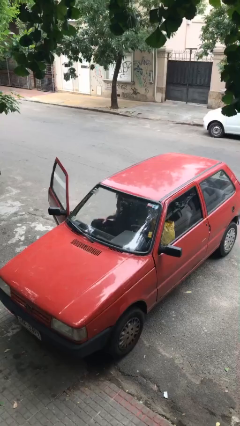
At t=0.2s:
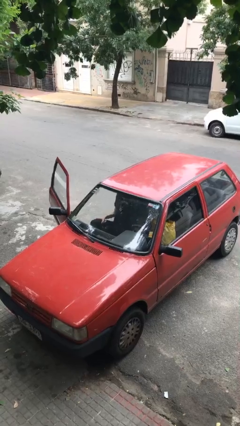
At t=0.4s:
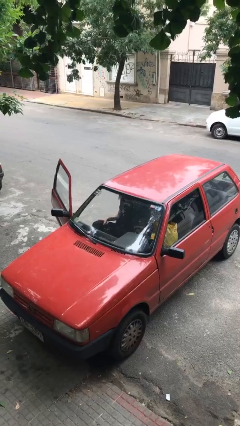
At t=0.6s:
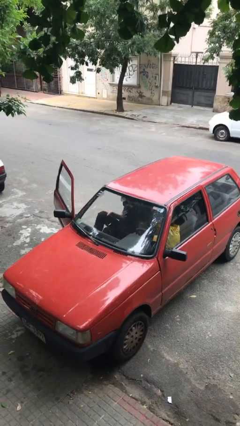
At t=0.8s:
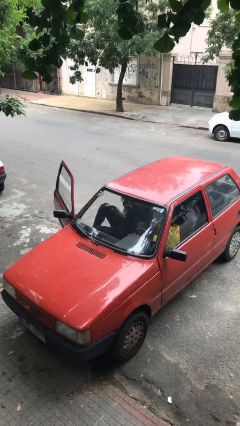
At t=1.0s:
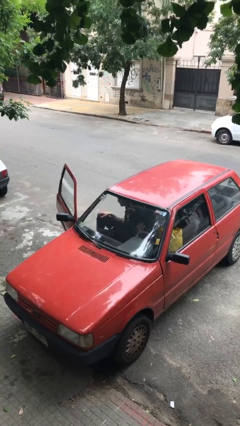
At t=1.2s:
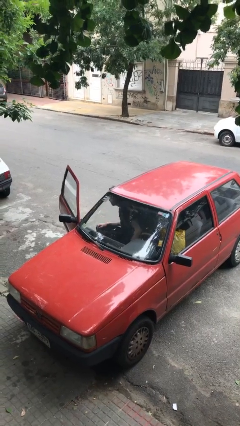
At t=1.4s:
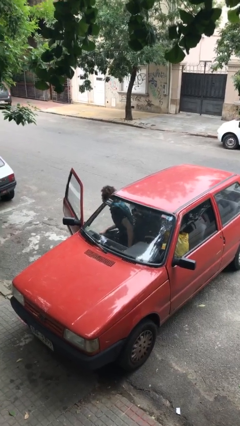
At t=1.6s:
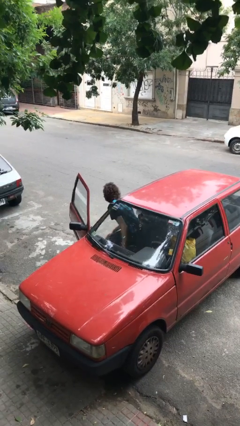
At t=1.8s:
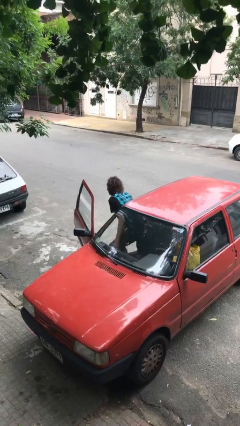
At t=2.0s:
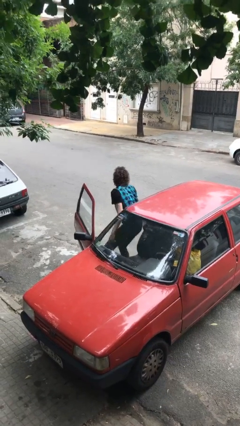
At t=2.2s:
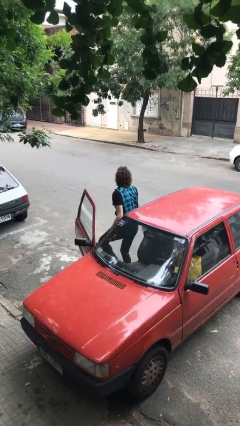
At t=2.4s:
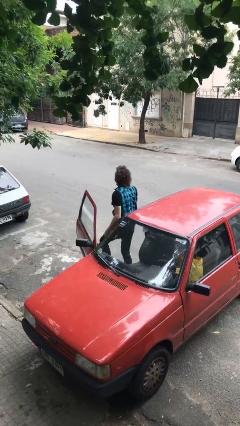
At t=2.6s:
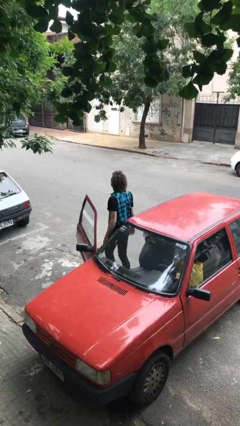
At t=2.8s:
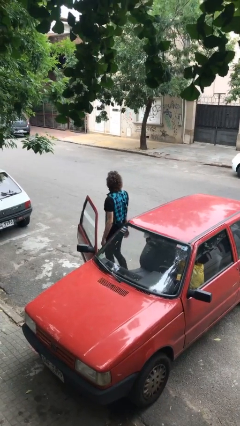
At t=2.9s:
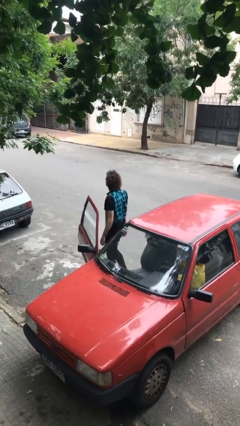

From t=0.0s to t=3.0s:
person exits car

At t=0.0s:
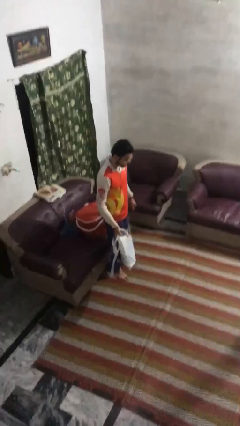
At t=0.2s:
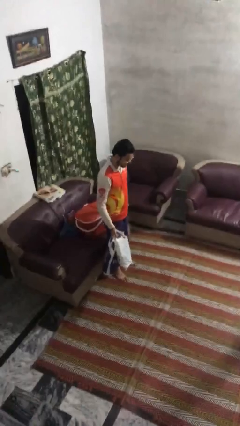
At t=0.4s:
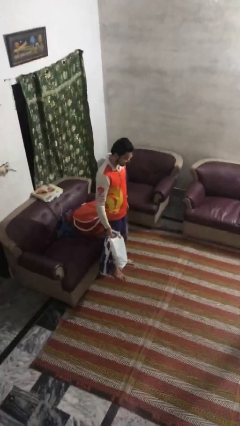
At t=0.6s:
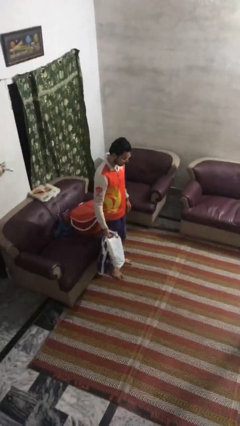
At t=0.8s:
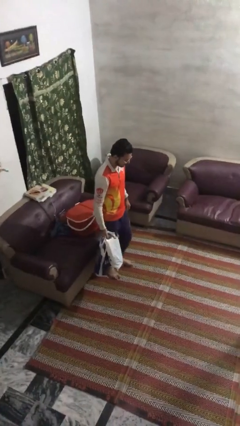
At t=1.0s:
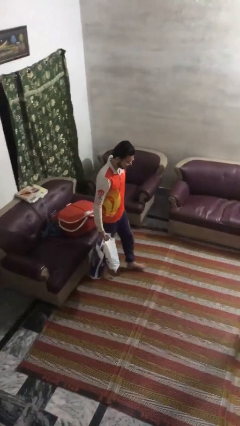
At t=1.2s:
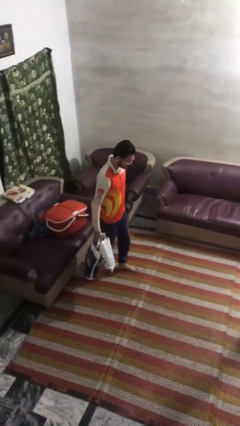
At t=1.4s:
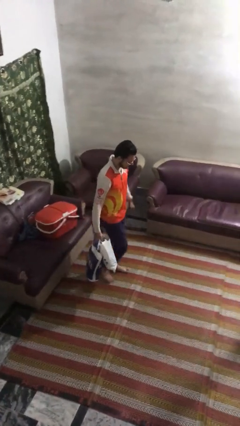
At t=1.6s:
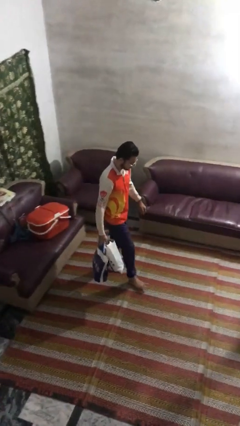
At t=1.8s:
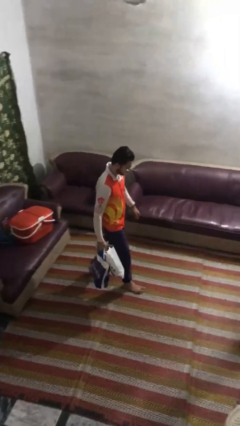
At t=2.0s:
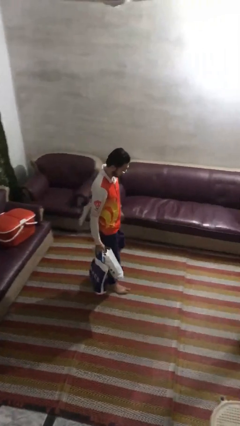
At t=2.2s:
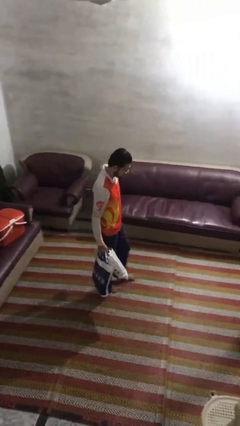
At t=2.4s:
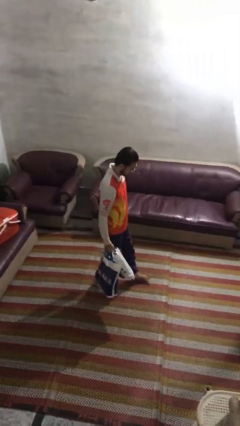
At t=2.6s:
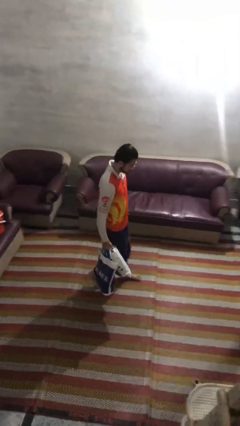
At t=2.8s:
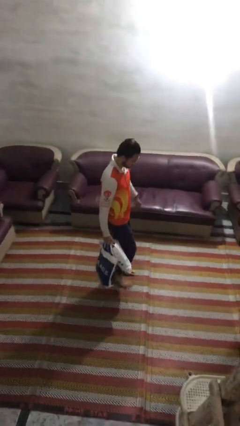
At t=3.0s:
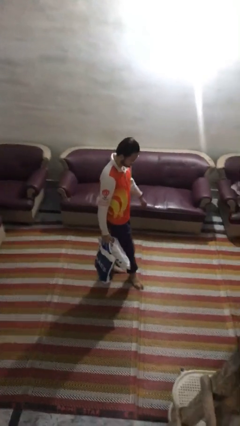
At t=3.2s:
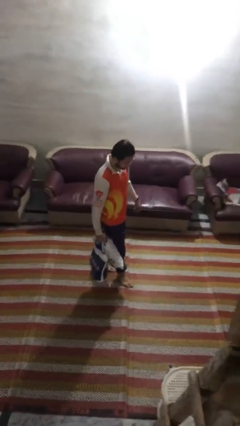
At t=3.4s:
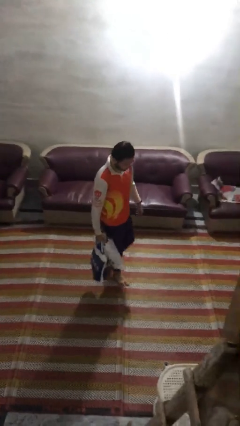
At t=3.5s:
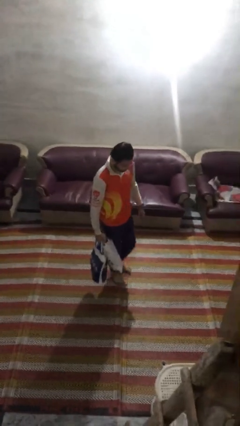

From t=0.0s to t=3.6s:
person carries groceries

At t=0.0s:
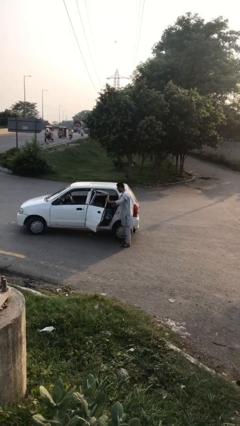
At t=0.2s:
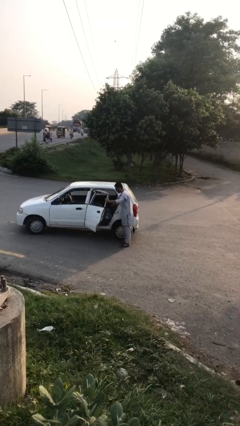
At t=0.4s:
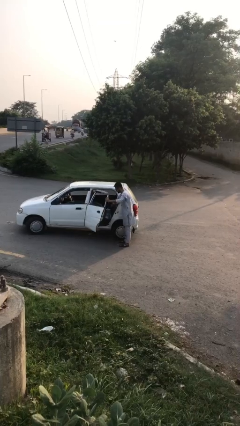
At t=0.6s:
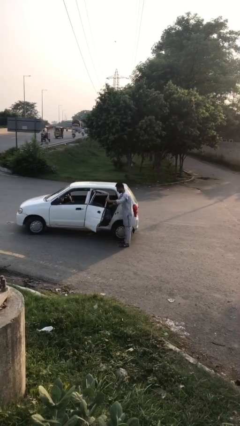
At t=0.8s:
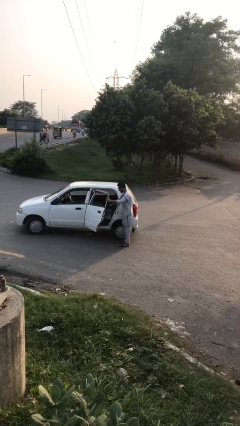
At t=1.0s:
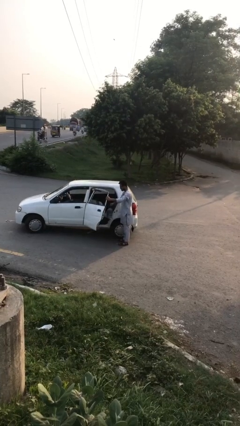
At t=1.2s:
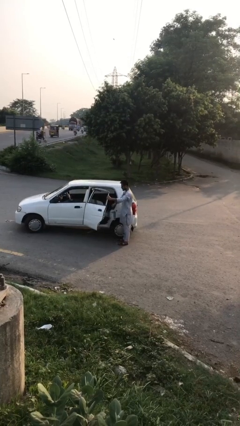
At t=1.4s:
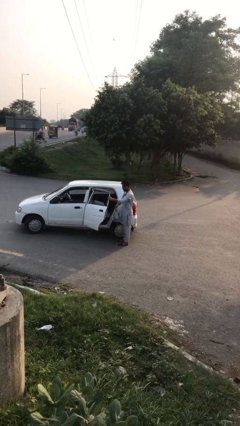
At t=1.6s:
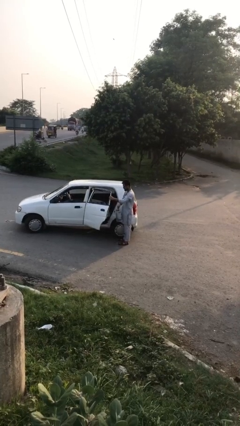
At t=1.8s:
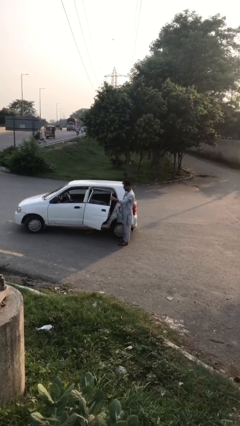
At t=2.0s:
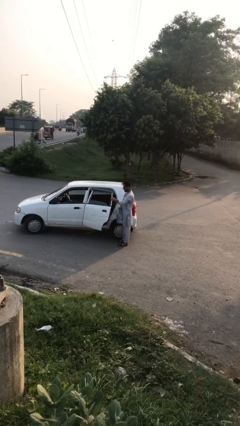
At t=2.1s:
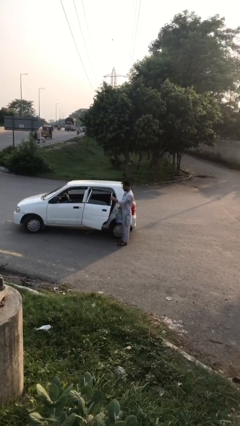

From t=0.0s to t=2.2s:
person unloads car

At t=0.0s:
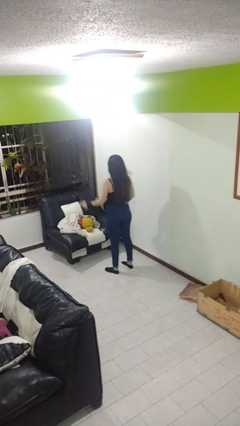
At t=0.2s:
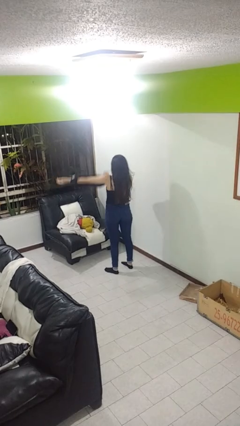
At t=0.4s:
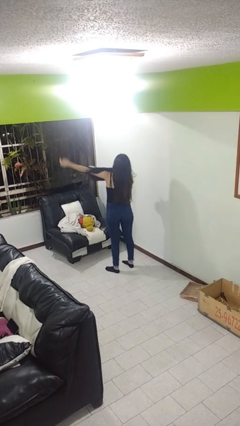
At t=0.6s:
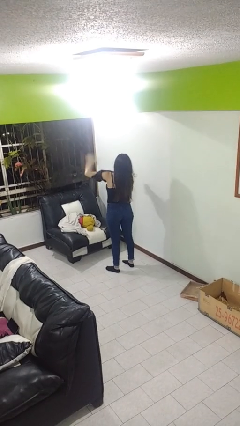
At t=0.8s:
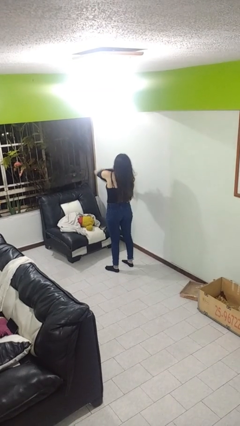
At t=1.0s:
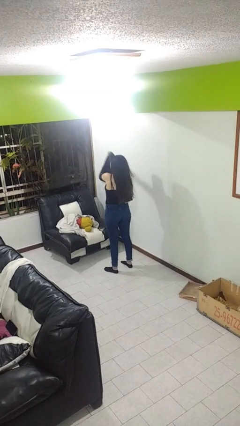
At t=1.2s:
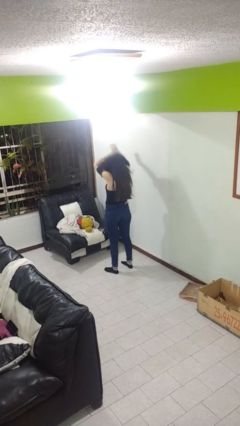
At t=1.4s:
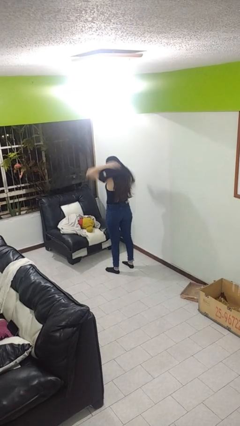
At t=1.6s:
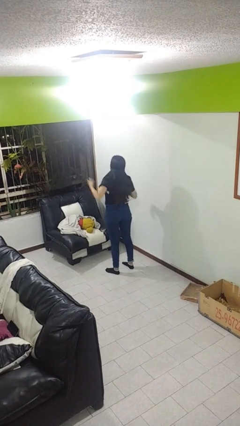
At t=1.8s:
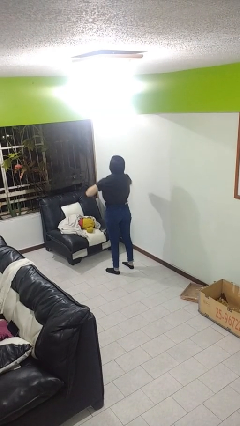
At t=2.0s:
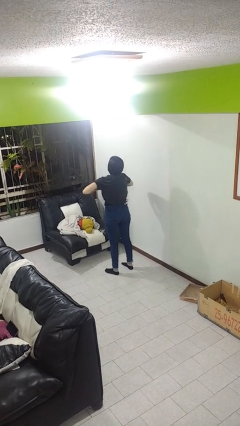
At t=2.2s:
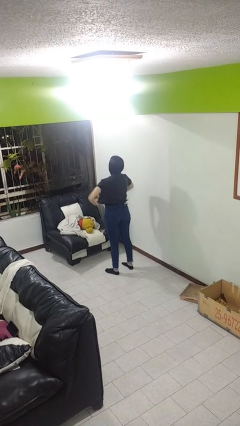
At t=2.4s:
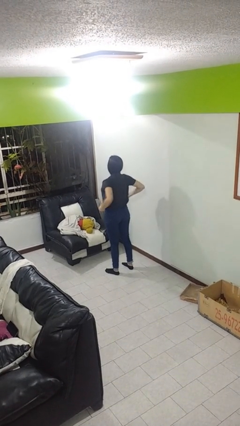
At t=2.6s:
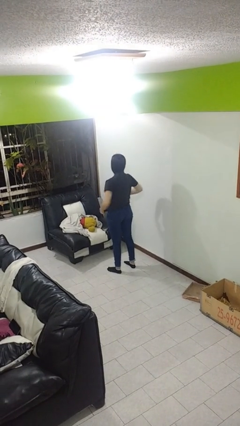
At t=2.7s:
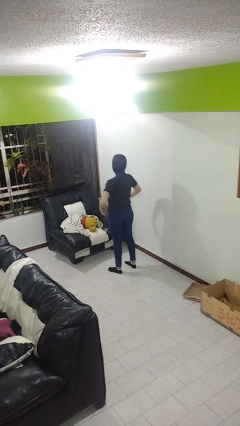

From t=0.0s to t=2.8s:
person puts on shirt

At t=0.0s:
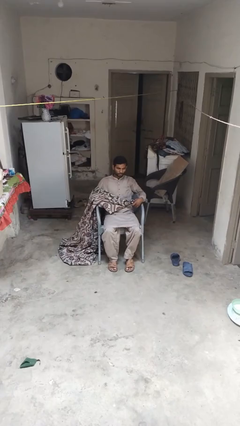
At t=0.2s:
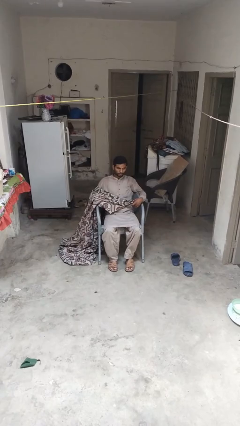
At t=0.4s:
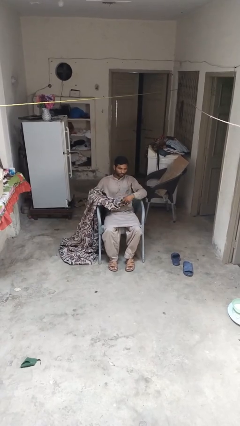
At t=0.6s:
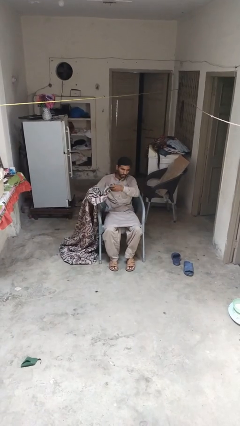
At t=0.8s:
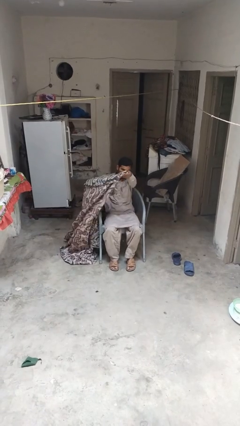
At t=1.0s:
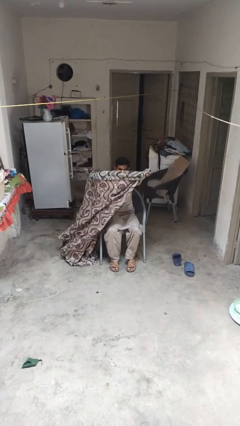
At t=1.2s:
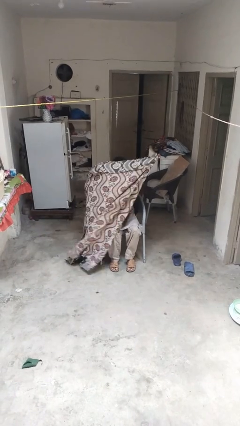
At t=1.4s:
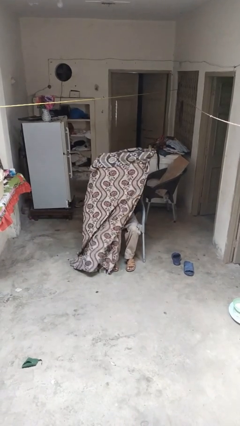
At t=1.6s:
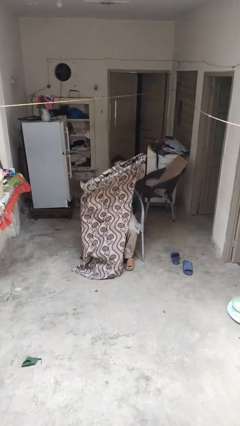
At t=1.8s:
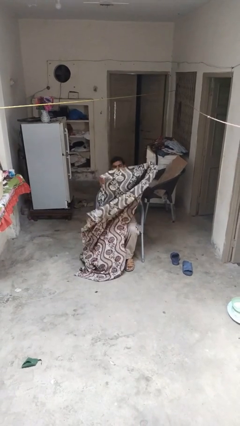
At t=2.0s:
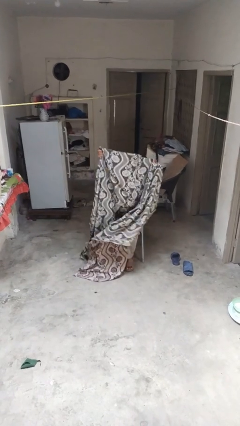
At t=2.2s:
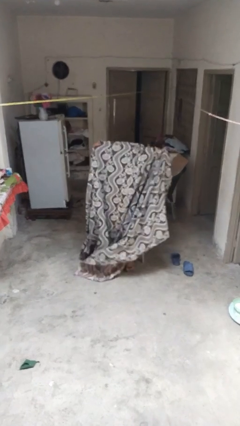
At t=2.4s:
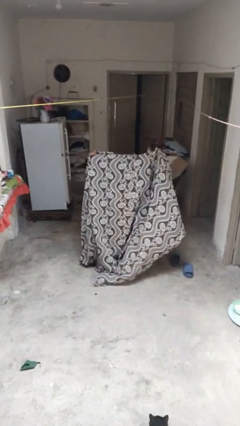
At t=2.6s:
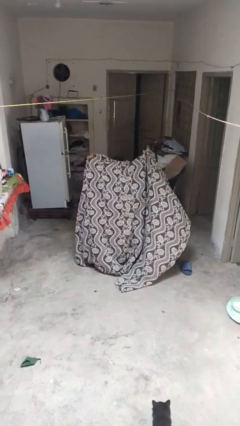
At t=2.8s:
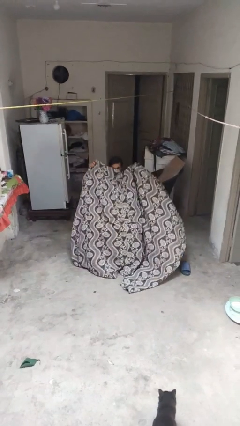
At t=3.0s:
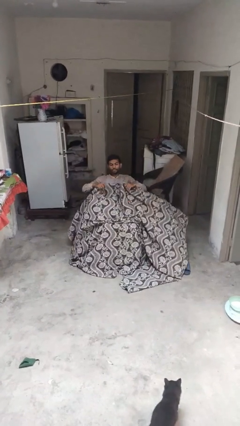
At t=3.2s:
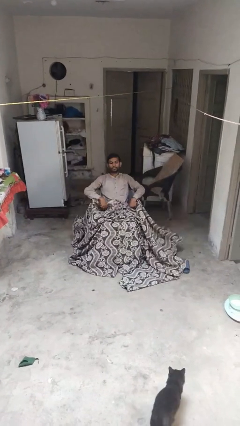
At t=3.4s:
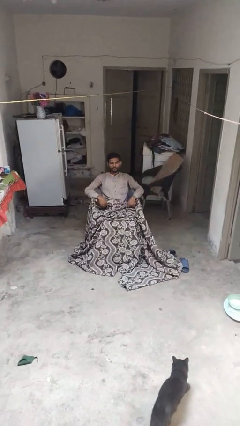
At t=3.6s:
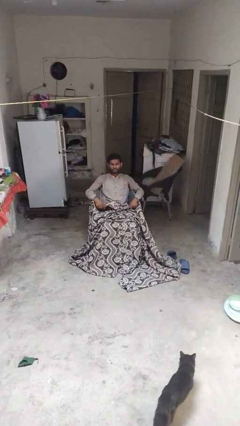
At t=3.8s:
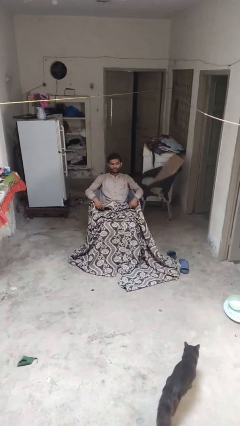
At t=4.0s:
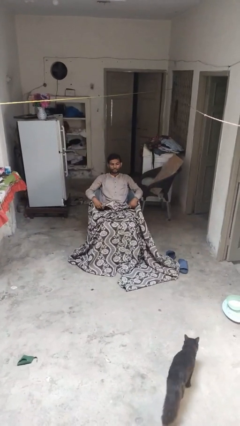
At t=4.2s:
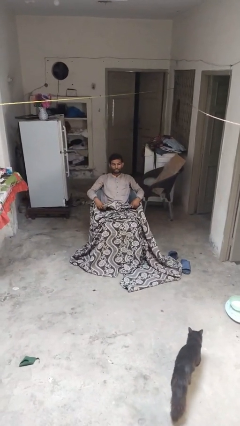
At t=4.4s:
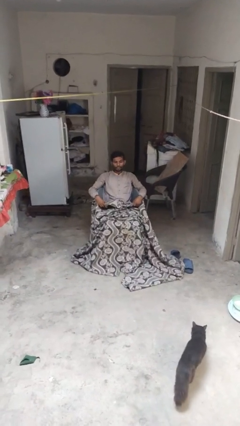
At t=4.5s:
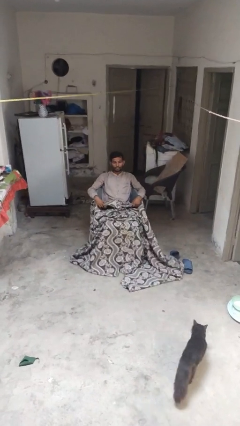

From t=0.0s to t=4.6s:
person covers with blanket

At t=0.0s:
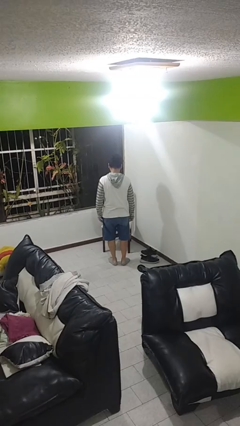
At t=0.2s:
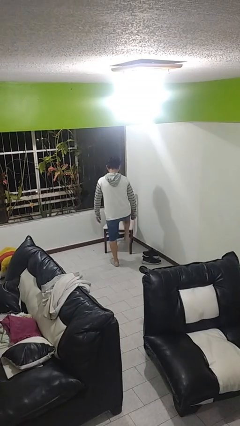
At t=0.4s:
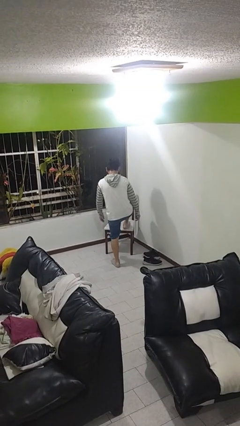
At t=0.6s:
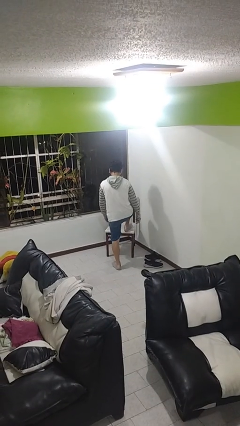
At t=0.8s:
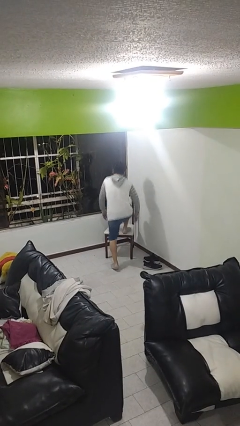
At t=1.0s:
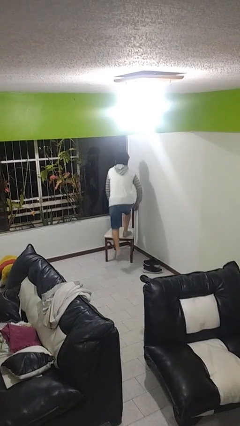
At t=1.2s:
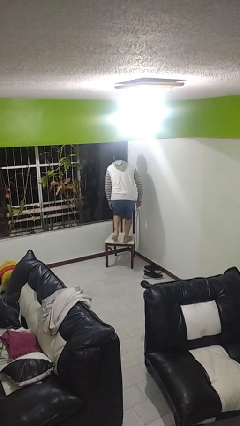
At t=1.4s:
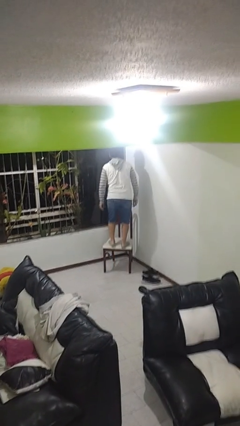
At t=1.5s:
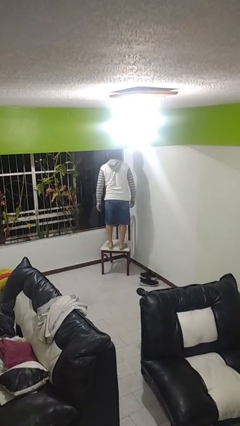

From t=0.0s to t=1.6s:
person climbs on chair
